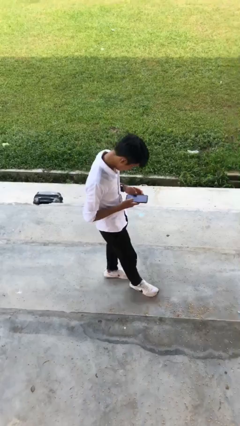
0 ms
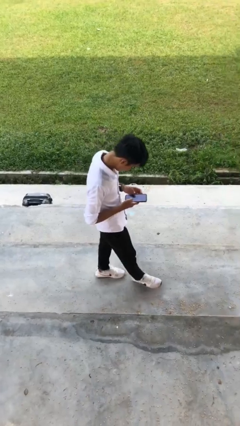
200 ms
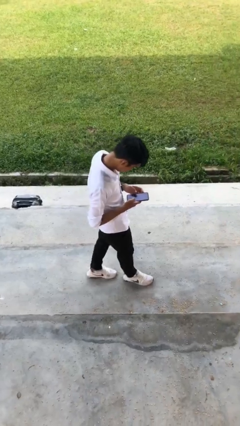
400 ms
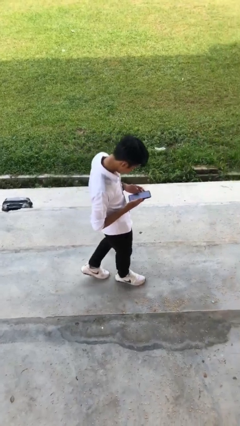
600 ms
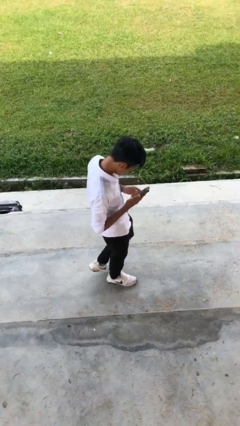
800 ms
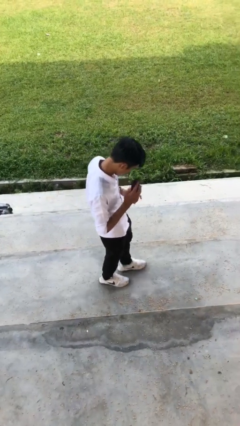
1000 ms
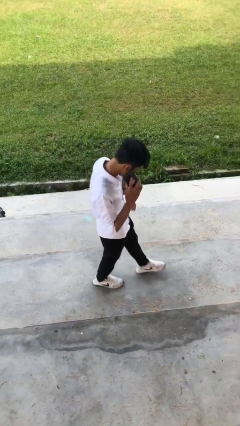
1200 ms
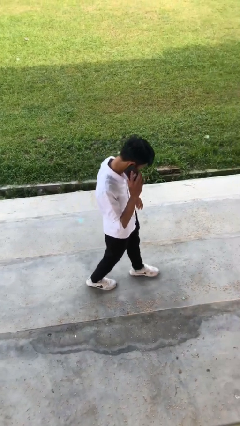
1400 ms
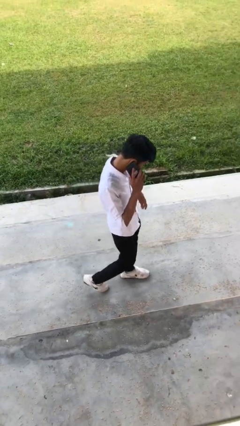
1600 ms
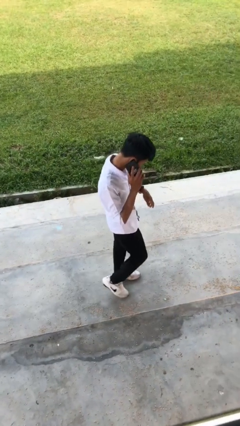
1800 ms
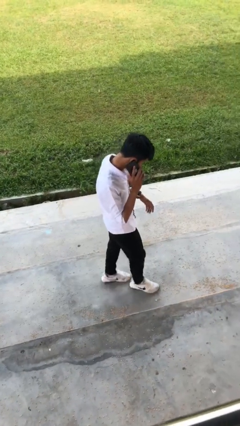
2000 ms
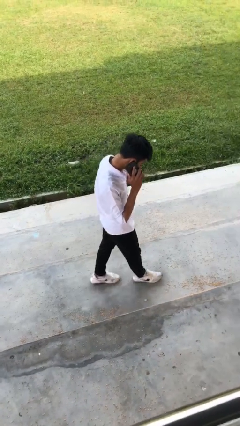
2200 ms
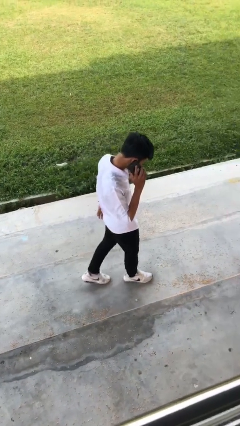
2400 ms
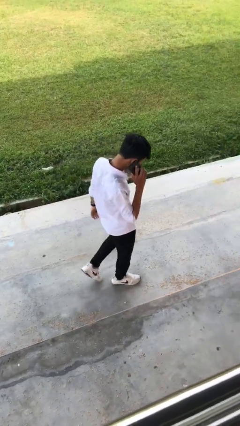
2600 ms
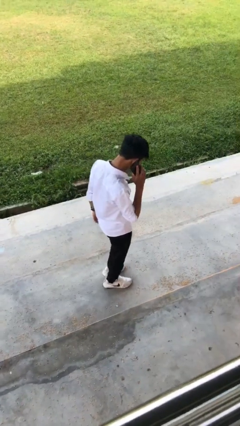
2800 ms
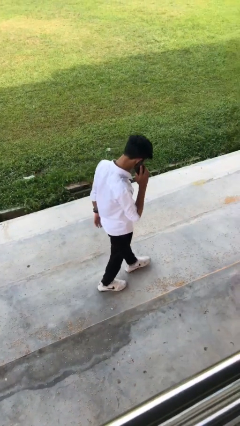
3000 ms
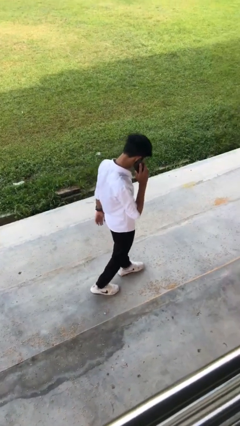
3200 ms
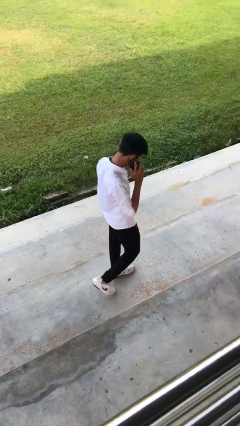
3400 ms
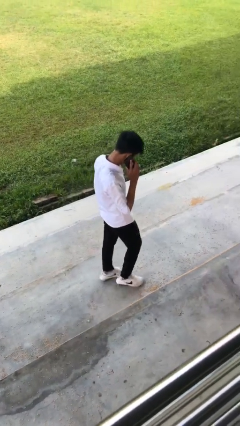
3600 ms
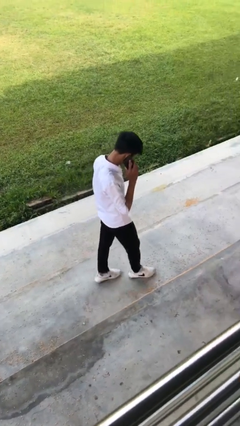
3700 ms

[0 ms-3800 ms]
person talks on phone

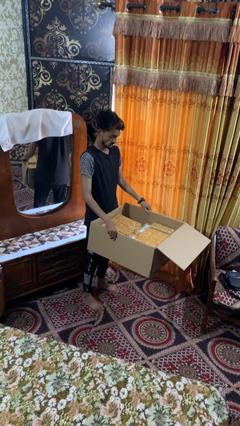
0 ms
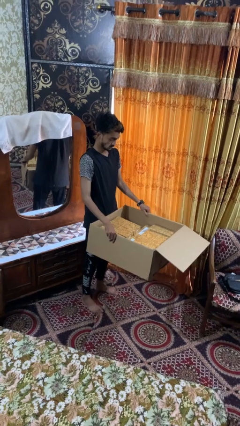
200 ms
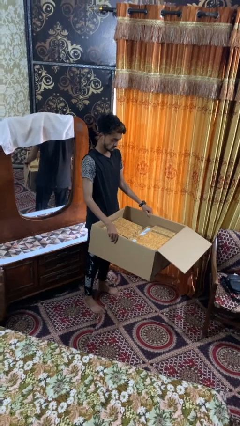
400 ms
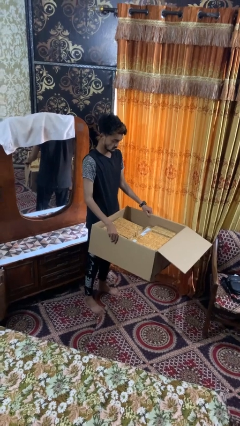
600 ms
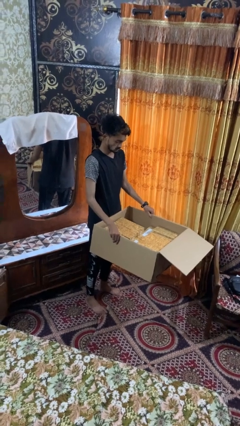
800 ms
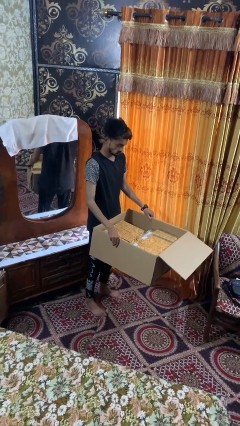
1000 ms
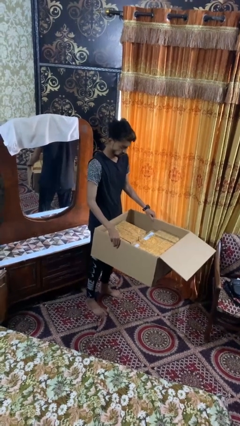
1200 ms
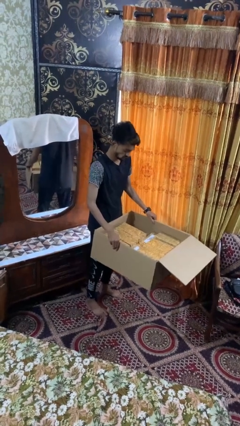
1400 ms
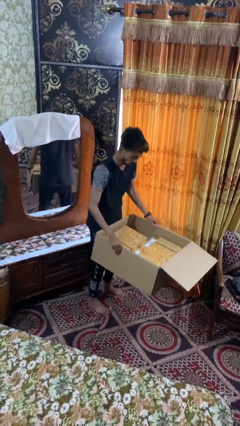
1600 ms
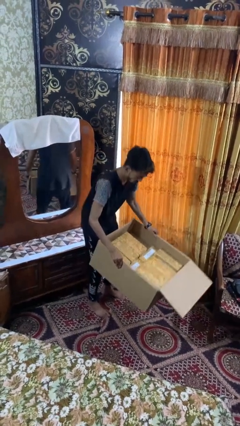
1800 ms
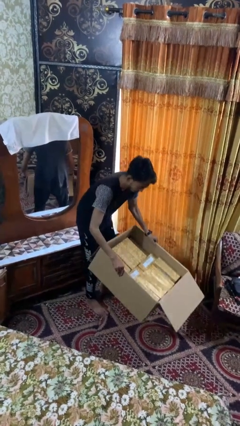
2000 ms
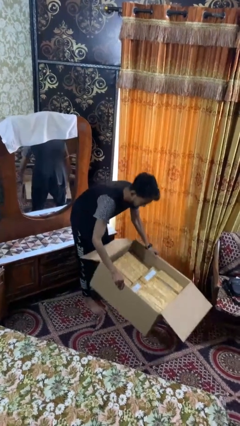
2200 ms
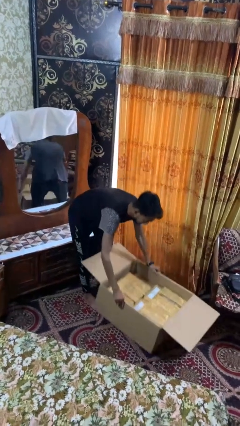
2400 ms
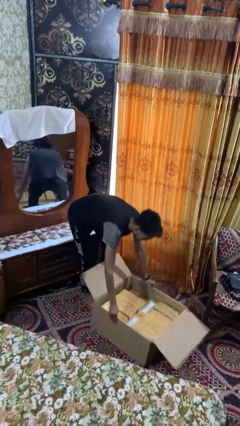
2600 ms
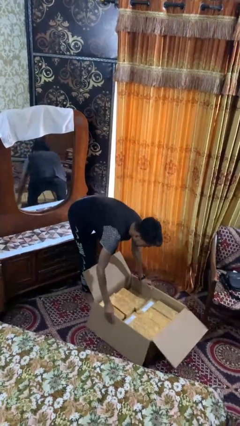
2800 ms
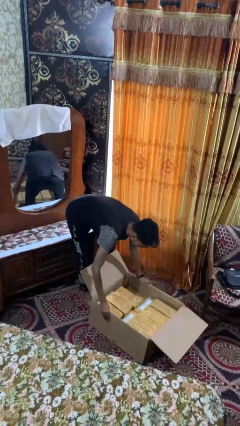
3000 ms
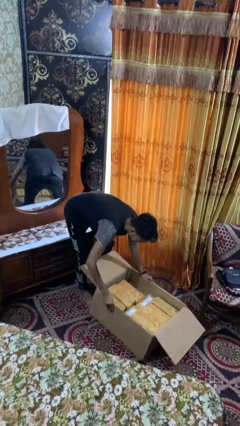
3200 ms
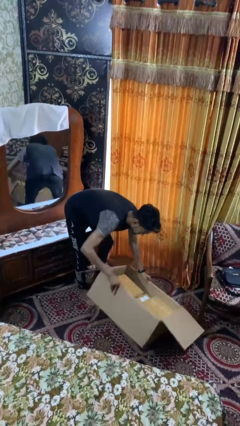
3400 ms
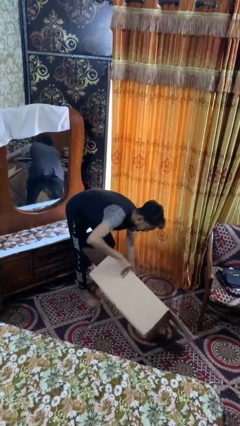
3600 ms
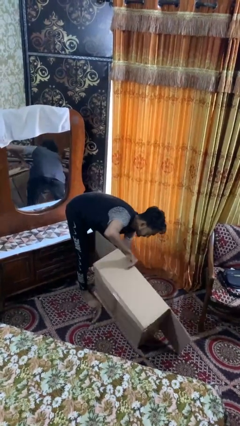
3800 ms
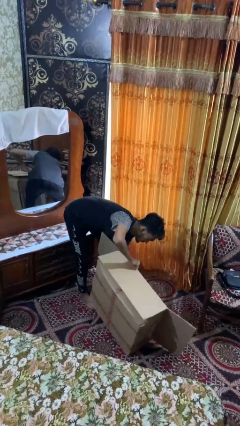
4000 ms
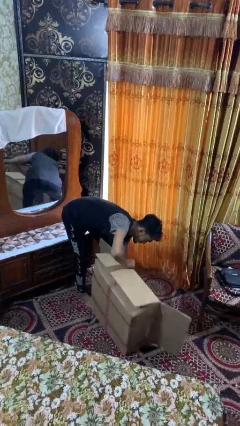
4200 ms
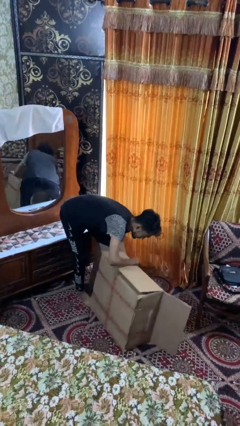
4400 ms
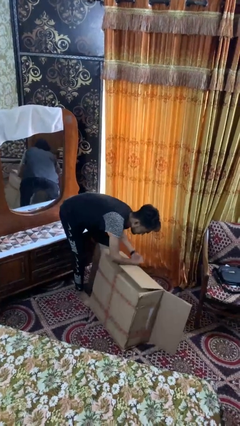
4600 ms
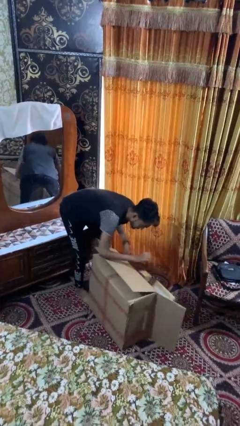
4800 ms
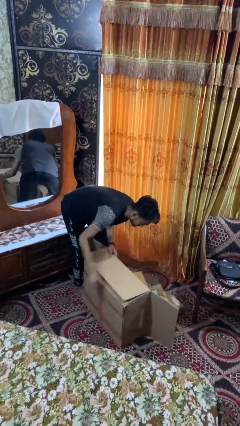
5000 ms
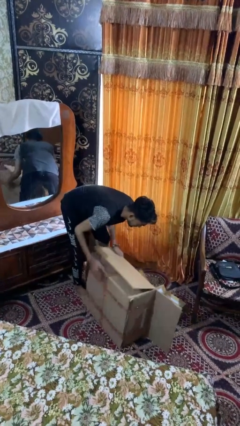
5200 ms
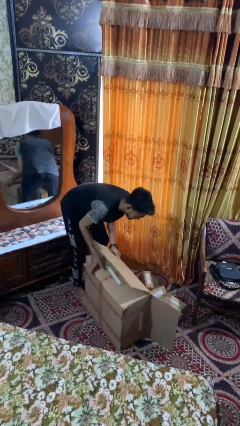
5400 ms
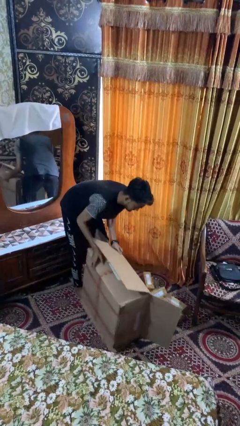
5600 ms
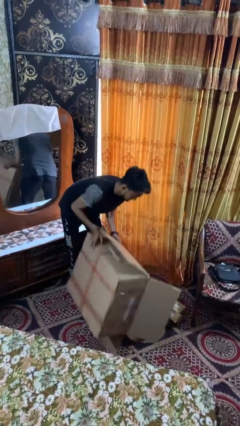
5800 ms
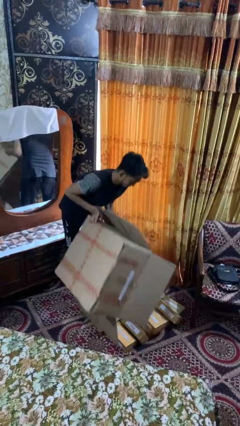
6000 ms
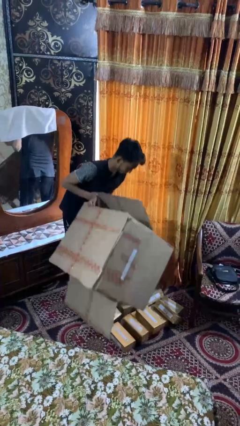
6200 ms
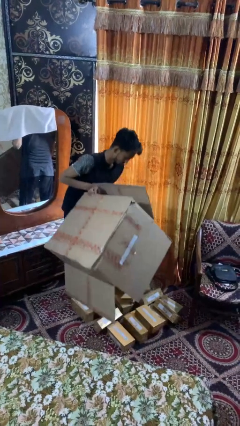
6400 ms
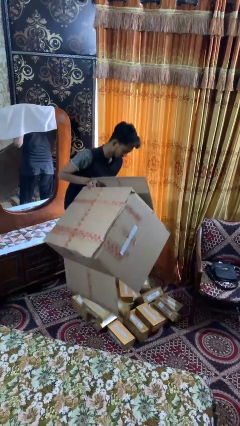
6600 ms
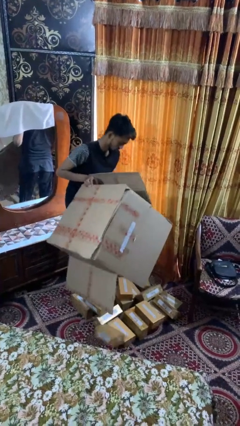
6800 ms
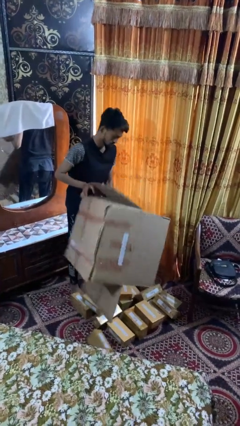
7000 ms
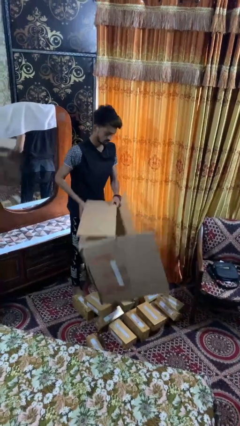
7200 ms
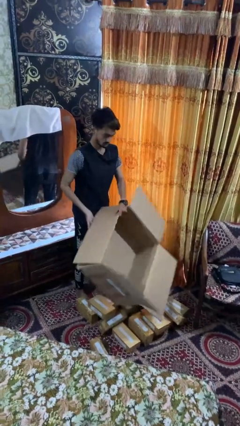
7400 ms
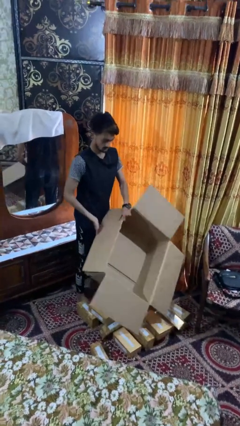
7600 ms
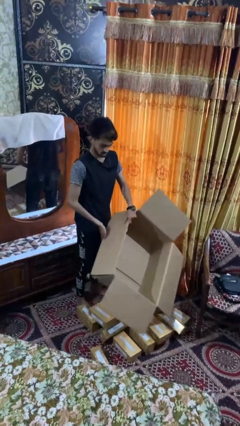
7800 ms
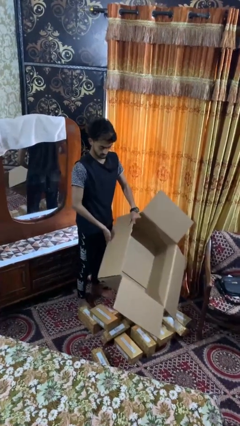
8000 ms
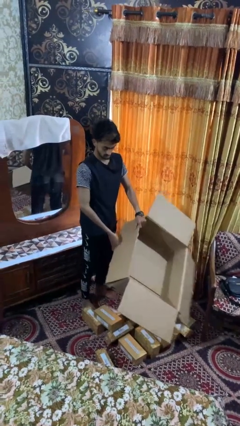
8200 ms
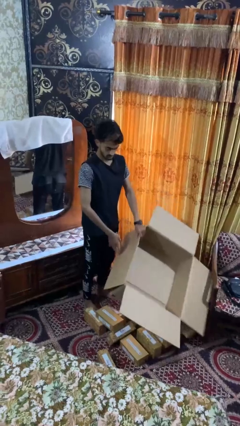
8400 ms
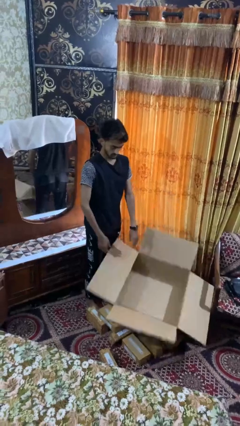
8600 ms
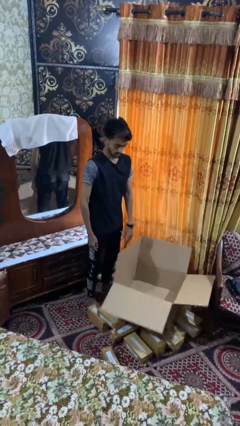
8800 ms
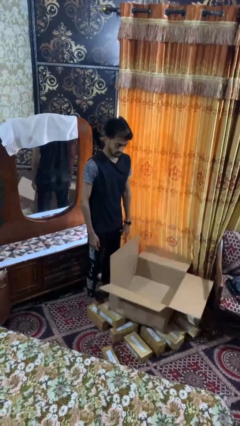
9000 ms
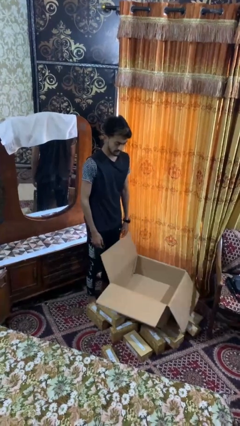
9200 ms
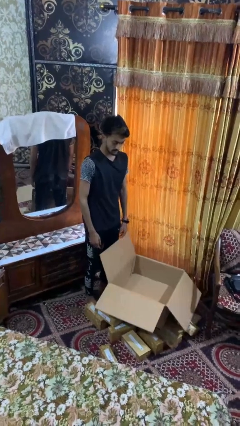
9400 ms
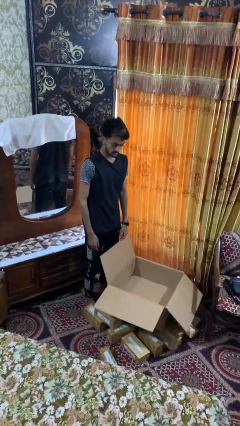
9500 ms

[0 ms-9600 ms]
person unloads box onto floor

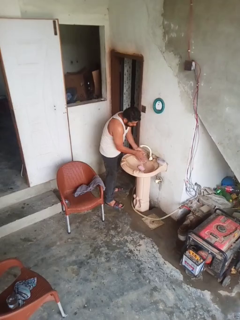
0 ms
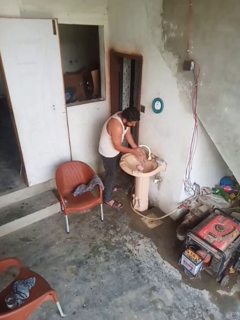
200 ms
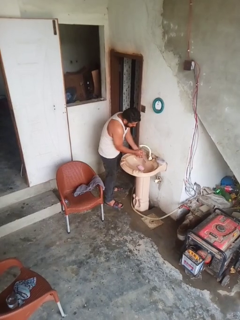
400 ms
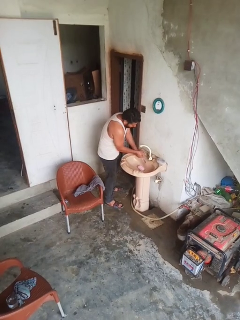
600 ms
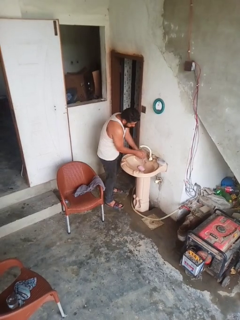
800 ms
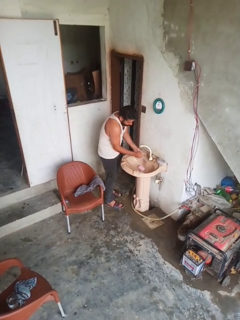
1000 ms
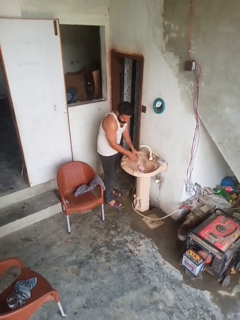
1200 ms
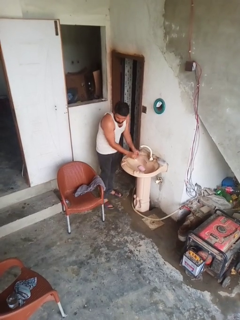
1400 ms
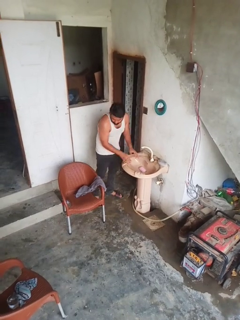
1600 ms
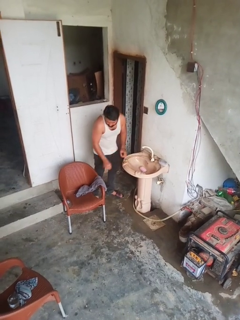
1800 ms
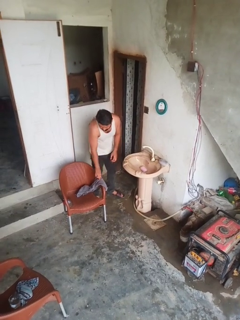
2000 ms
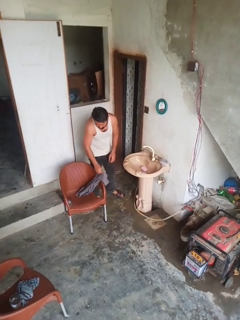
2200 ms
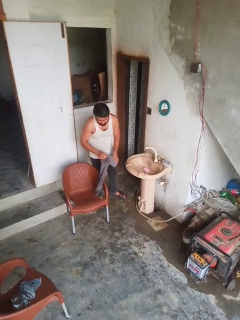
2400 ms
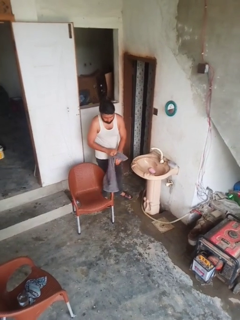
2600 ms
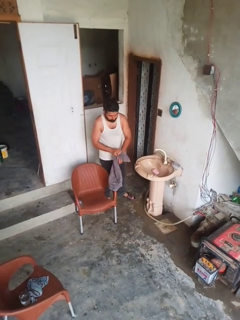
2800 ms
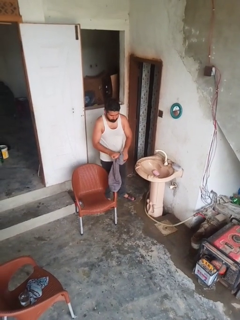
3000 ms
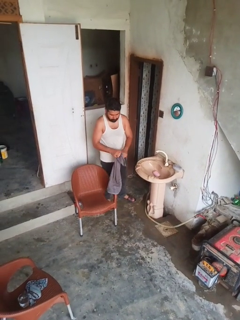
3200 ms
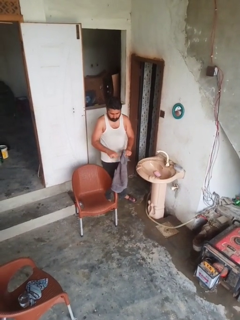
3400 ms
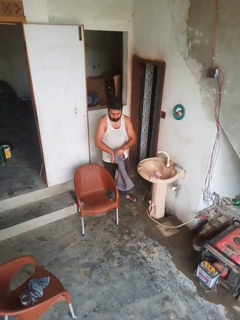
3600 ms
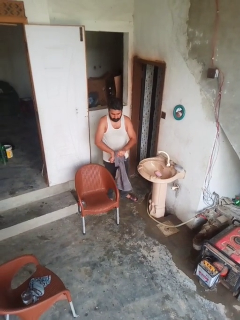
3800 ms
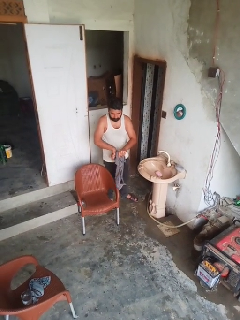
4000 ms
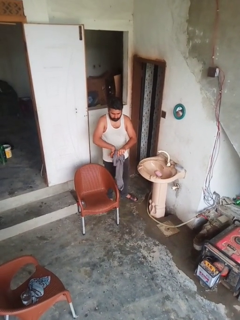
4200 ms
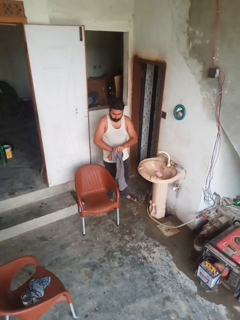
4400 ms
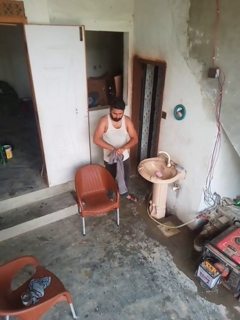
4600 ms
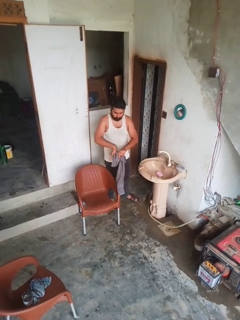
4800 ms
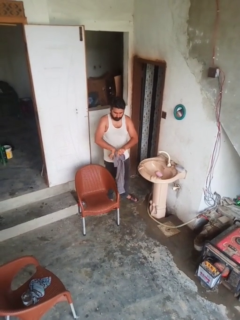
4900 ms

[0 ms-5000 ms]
person dries hands with towel

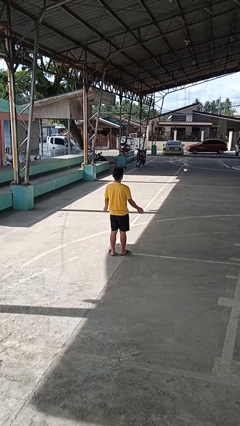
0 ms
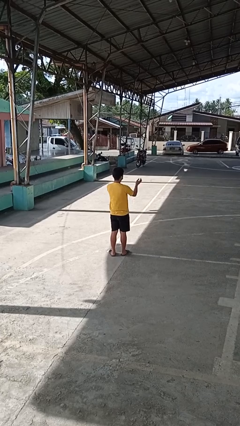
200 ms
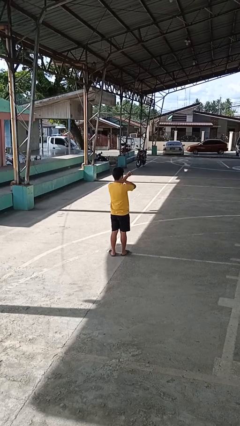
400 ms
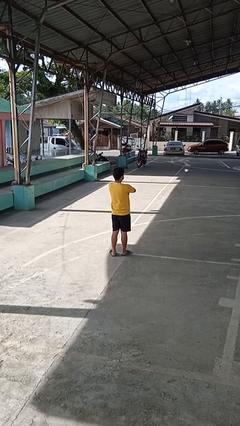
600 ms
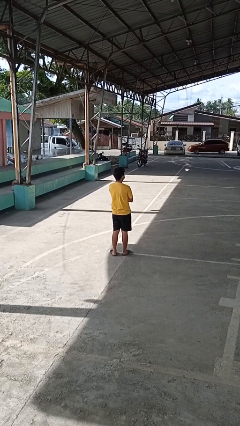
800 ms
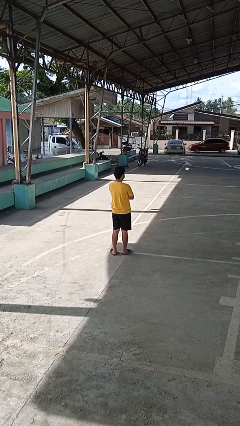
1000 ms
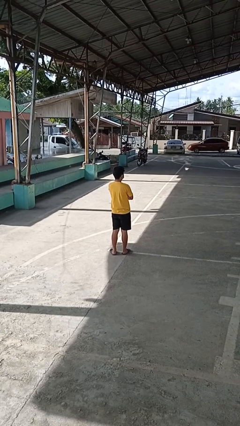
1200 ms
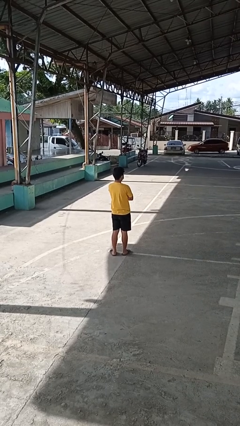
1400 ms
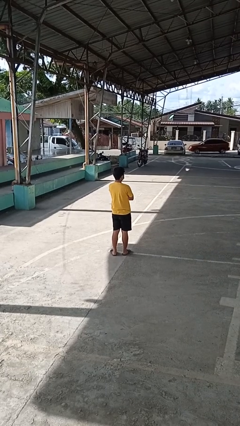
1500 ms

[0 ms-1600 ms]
person crosses arms
